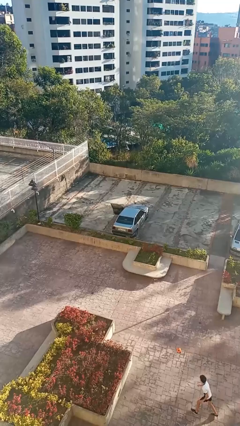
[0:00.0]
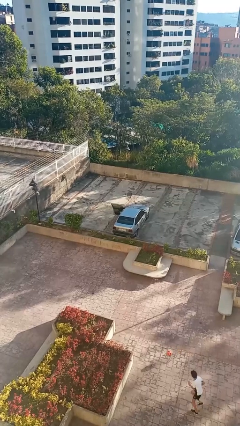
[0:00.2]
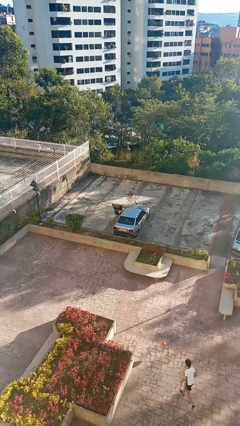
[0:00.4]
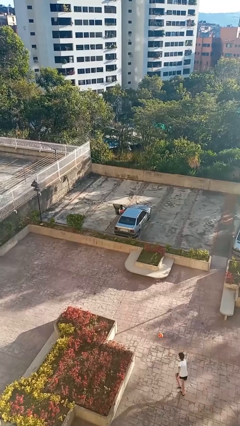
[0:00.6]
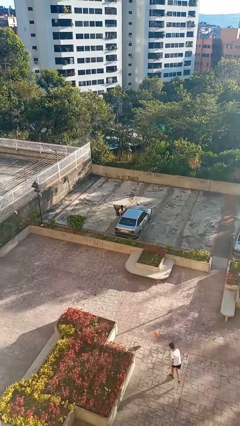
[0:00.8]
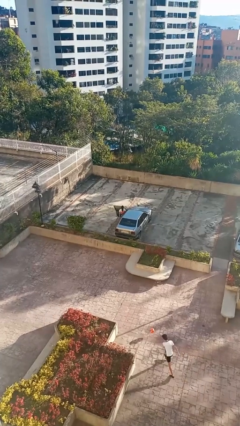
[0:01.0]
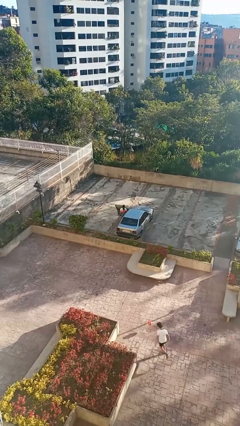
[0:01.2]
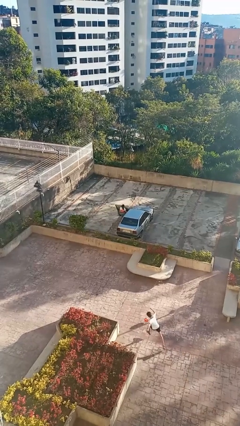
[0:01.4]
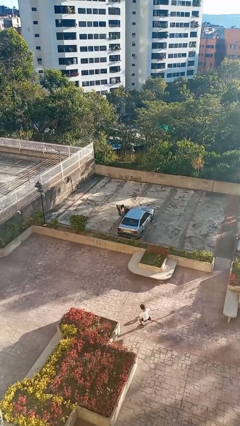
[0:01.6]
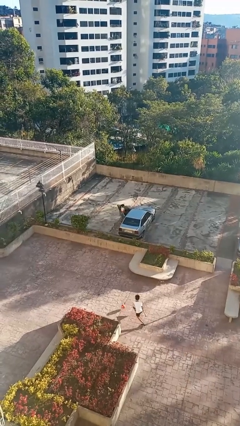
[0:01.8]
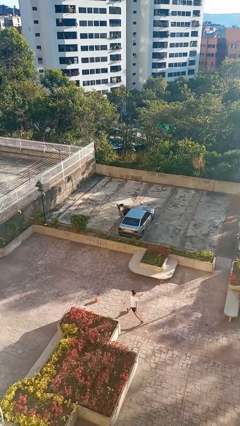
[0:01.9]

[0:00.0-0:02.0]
person exits car

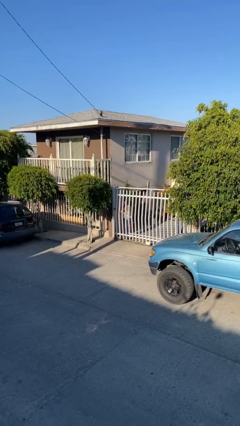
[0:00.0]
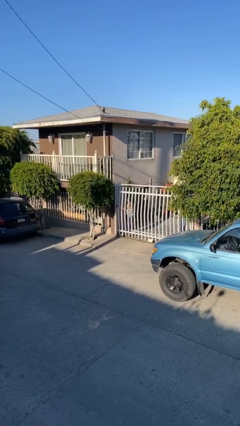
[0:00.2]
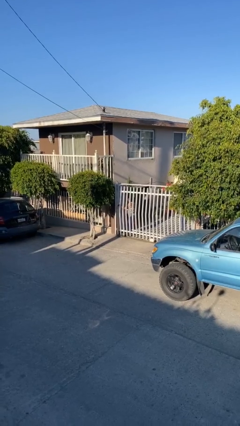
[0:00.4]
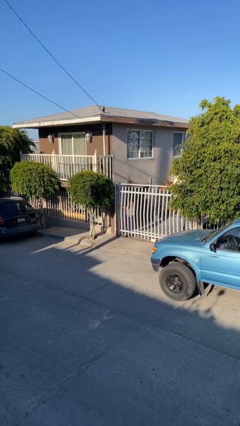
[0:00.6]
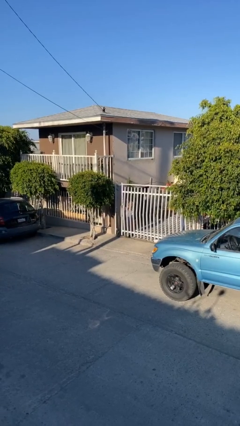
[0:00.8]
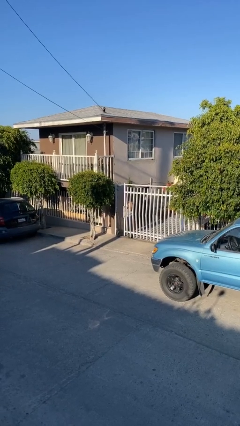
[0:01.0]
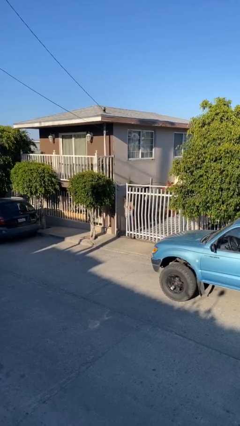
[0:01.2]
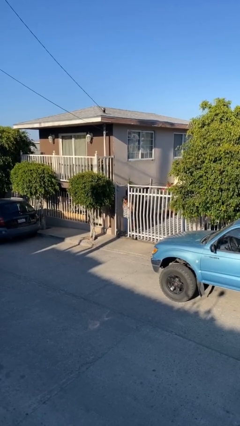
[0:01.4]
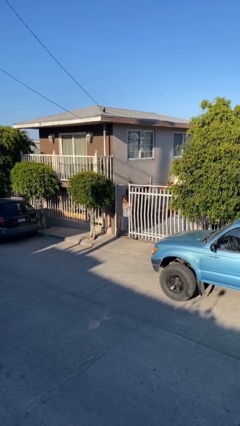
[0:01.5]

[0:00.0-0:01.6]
person opens facility door

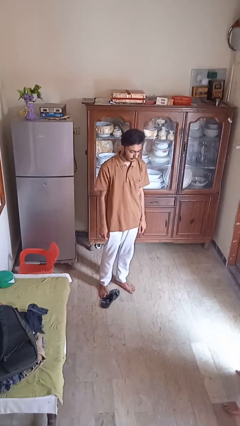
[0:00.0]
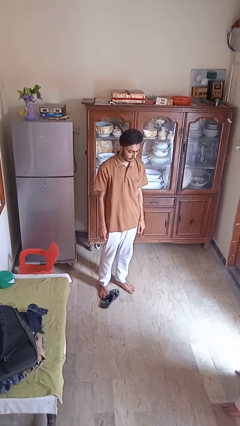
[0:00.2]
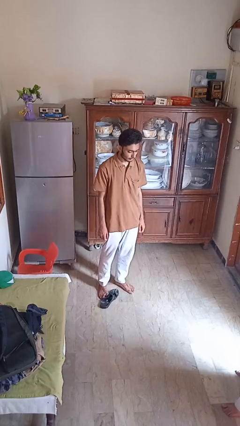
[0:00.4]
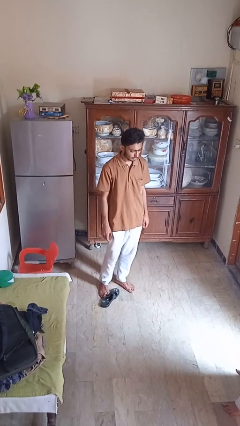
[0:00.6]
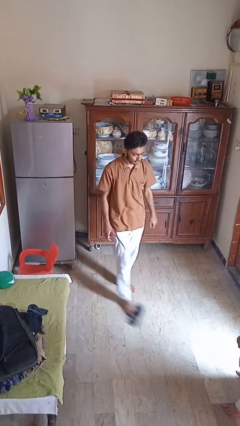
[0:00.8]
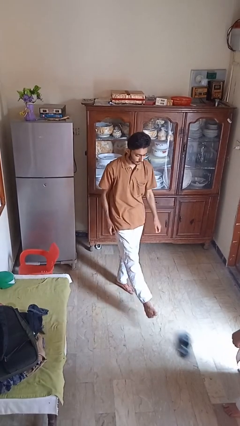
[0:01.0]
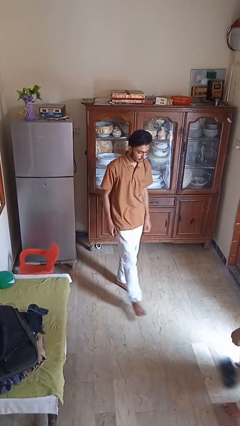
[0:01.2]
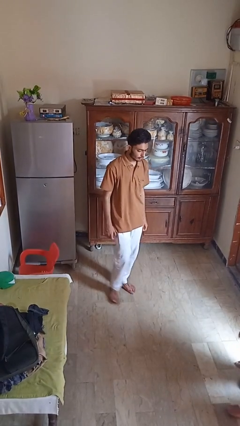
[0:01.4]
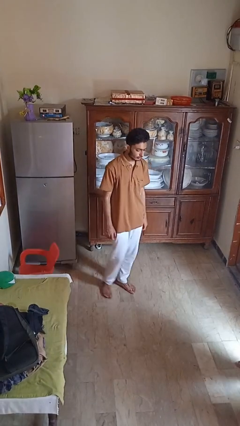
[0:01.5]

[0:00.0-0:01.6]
person kicks object to person

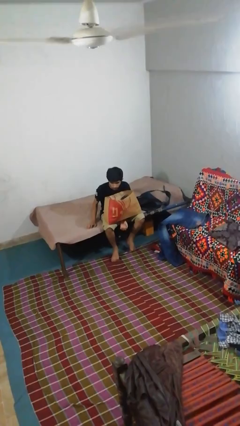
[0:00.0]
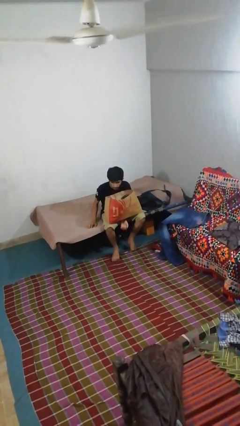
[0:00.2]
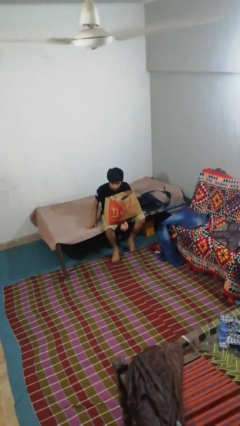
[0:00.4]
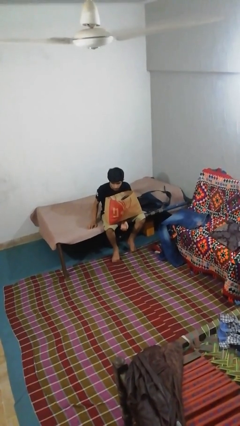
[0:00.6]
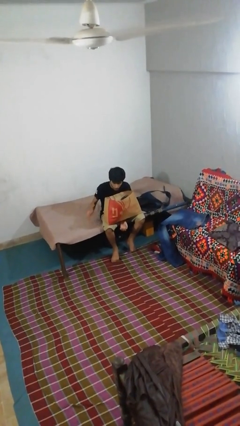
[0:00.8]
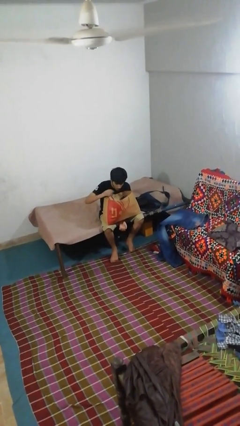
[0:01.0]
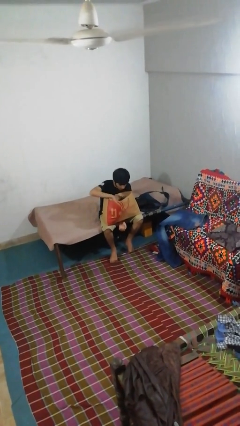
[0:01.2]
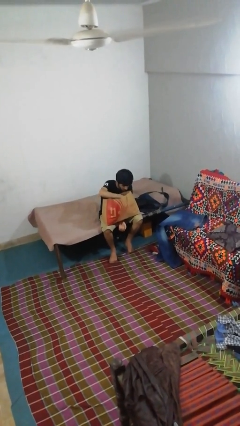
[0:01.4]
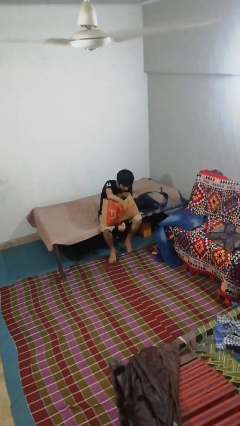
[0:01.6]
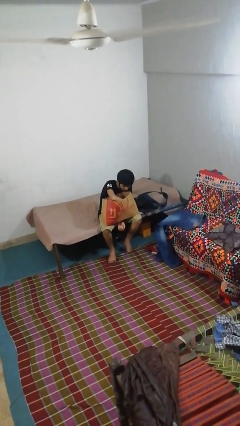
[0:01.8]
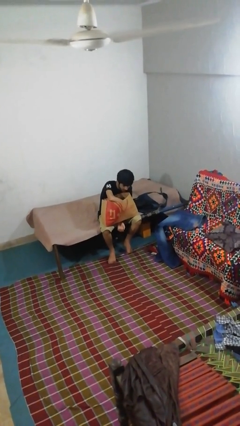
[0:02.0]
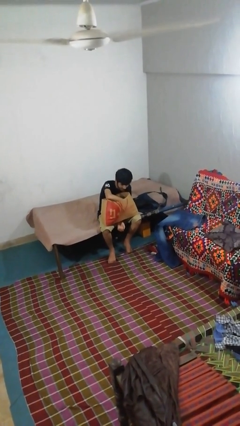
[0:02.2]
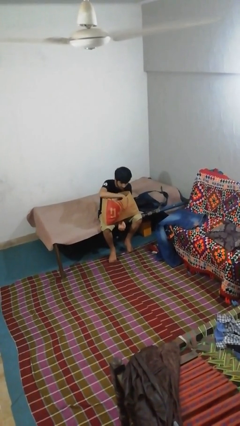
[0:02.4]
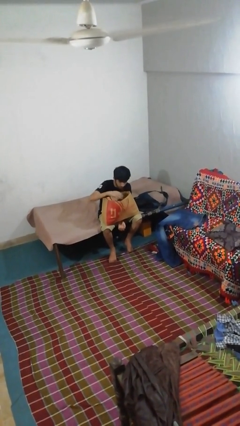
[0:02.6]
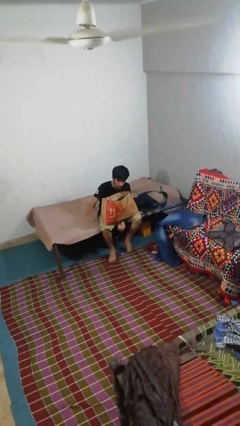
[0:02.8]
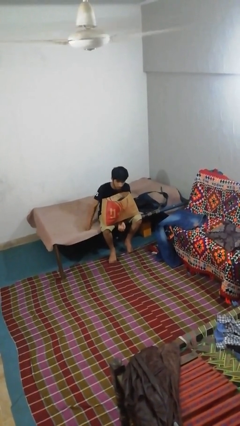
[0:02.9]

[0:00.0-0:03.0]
person searches in bag

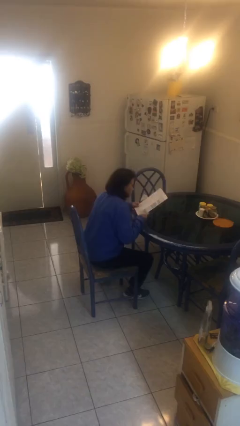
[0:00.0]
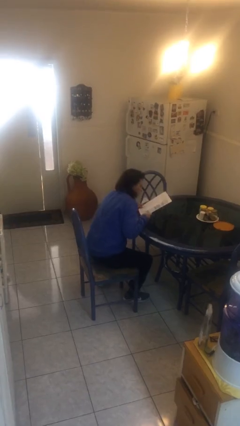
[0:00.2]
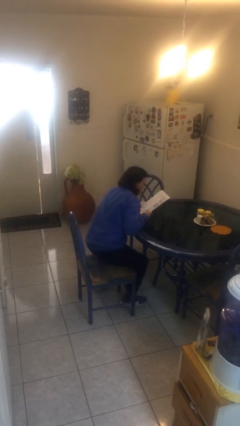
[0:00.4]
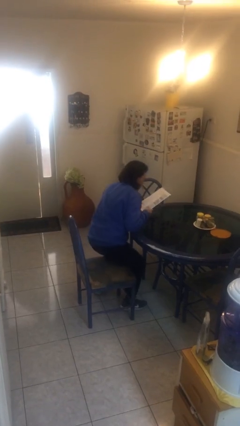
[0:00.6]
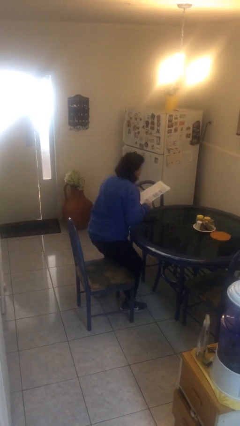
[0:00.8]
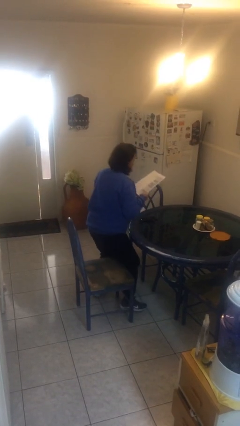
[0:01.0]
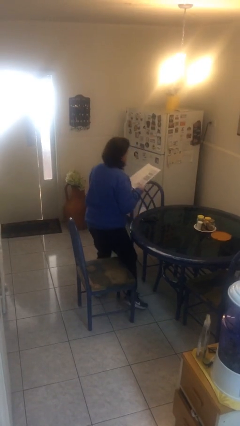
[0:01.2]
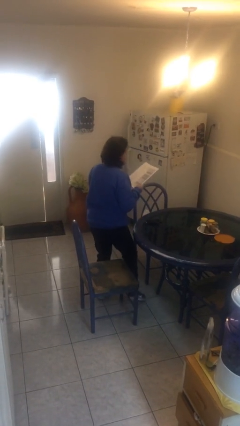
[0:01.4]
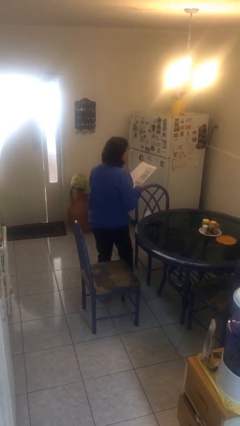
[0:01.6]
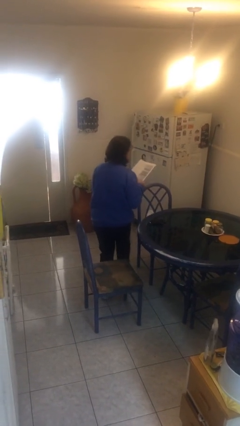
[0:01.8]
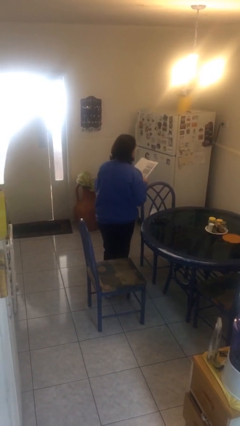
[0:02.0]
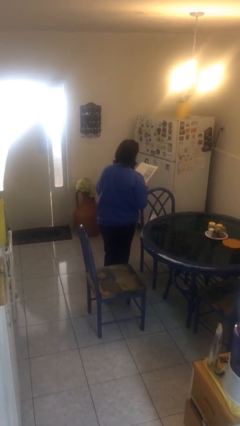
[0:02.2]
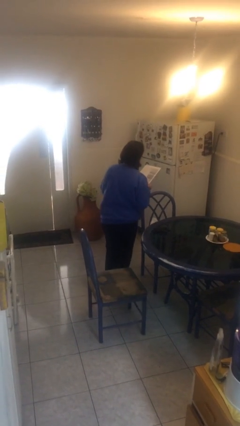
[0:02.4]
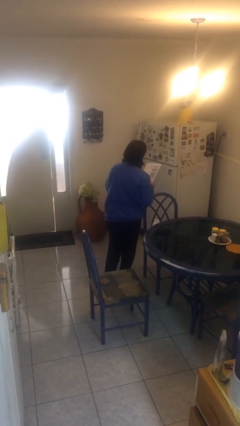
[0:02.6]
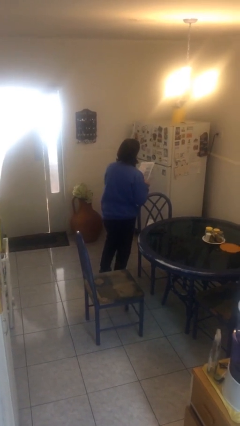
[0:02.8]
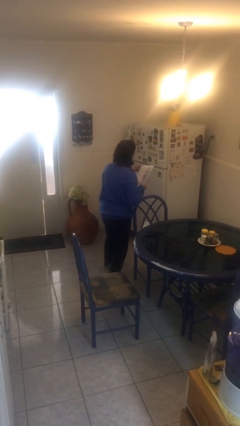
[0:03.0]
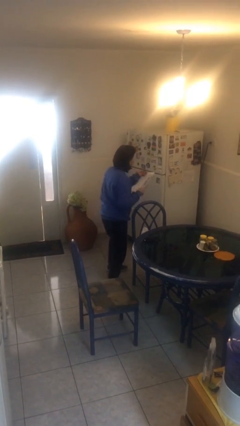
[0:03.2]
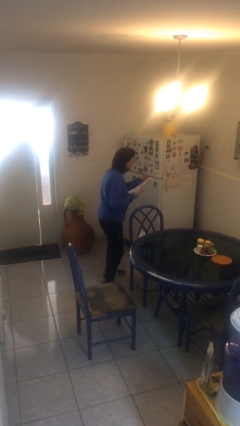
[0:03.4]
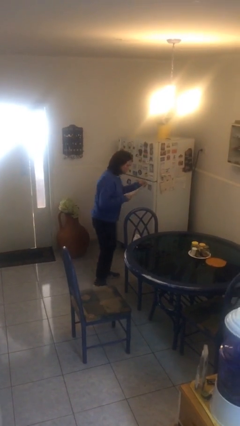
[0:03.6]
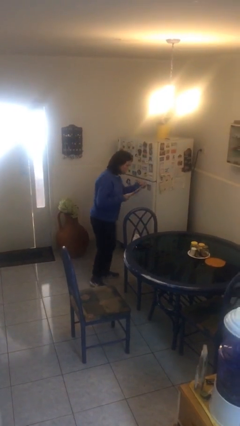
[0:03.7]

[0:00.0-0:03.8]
person stands up

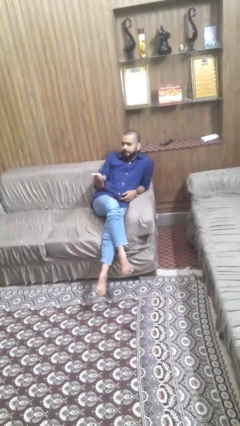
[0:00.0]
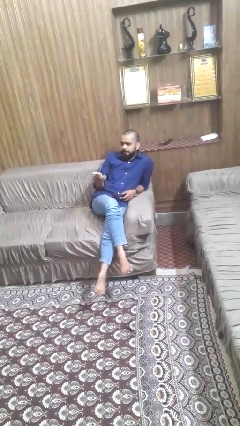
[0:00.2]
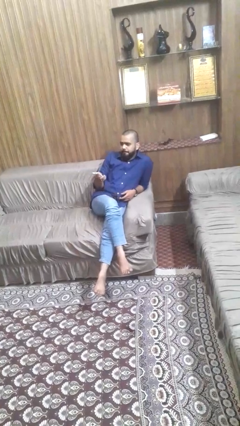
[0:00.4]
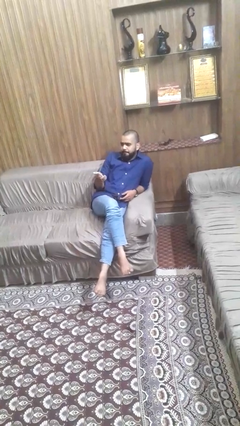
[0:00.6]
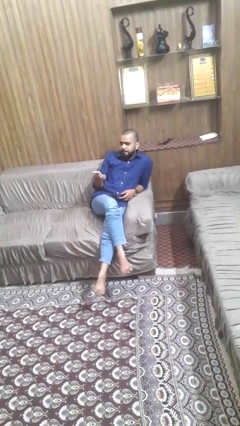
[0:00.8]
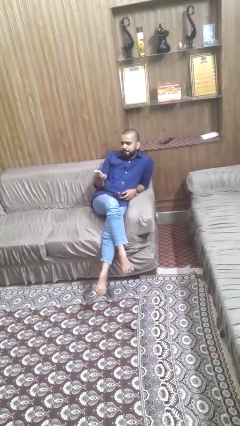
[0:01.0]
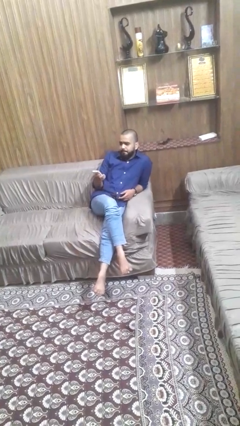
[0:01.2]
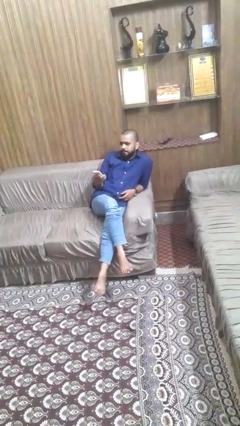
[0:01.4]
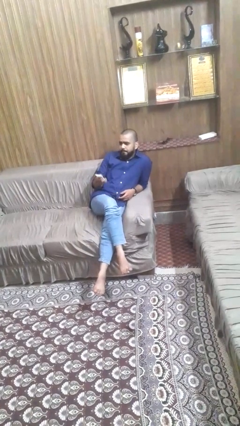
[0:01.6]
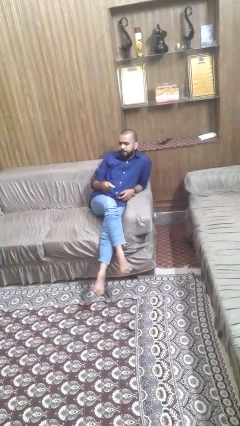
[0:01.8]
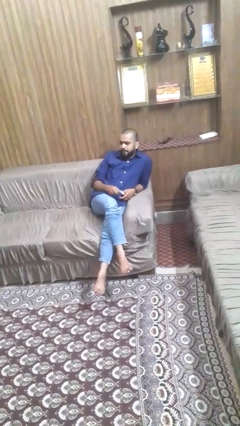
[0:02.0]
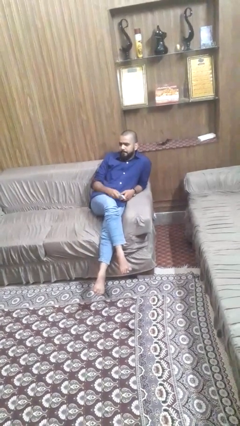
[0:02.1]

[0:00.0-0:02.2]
person uses television remote

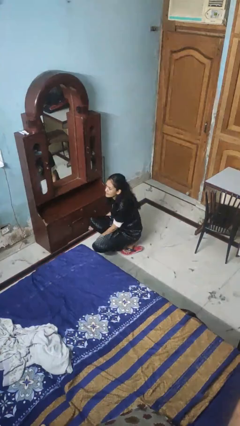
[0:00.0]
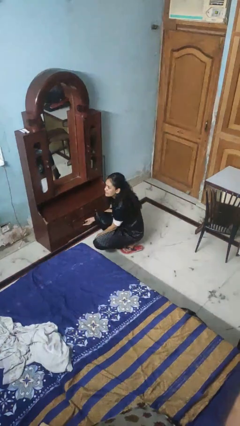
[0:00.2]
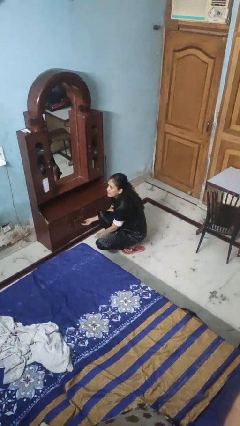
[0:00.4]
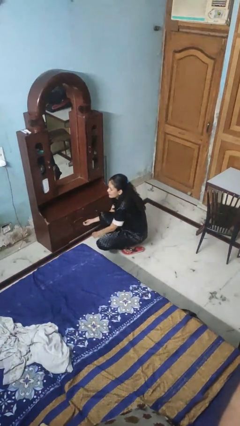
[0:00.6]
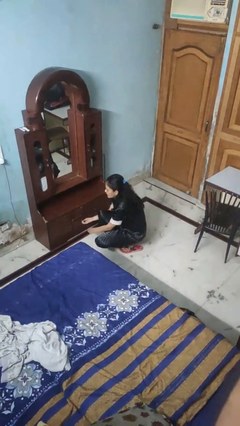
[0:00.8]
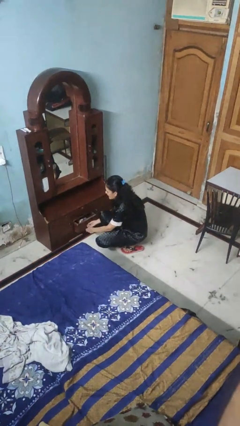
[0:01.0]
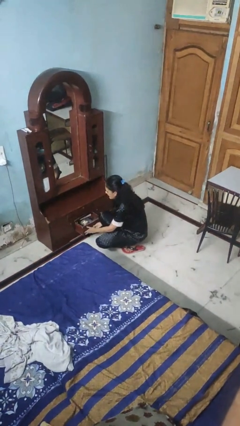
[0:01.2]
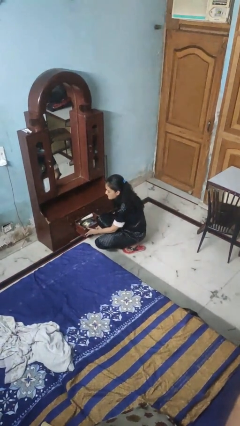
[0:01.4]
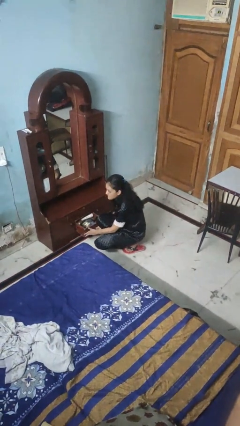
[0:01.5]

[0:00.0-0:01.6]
person opens dresser drawer

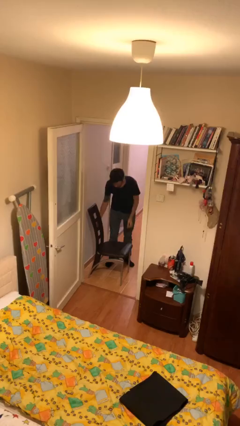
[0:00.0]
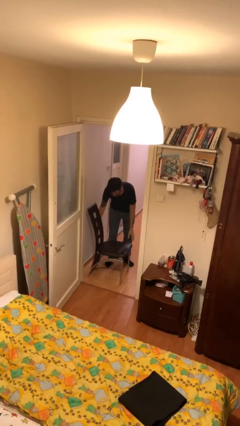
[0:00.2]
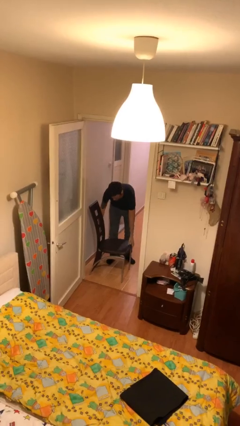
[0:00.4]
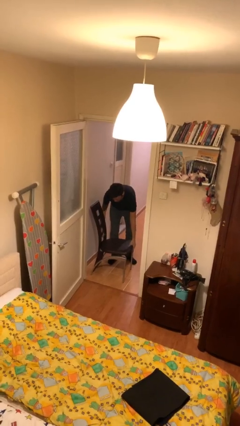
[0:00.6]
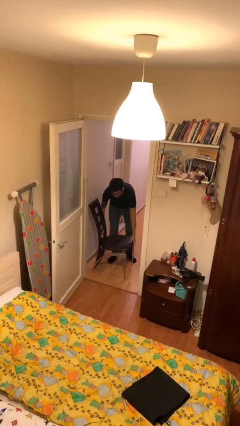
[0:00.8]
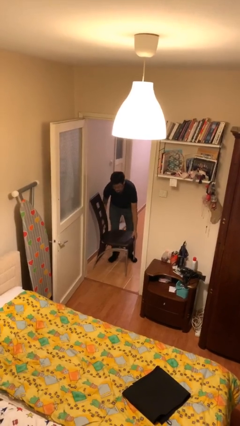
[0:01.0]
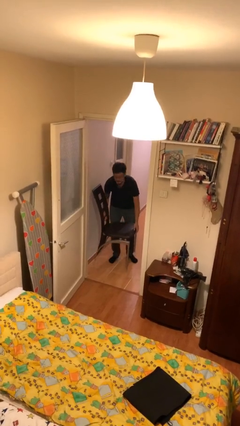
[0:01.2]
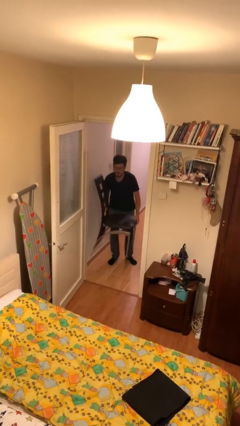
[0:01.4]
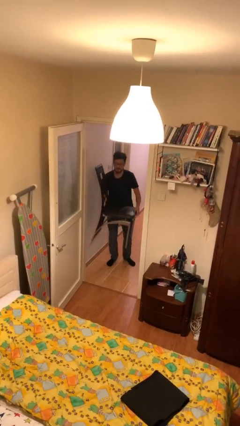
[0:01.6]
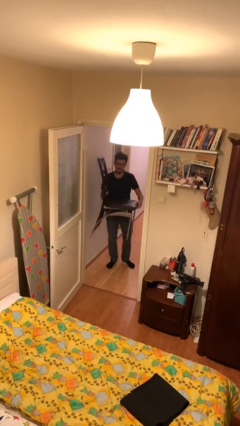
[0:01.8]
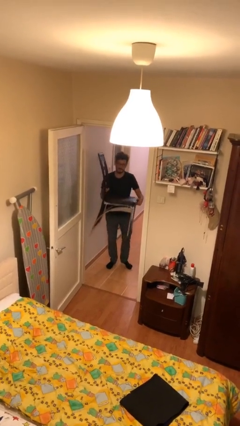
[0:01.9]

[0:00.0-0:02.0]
person picks up object from floor
